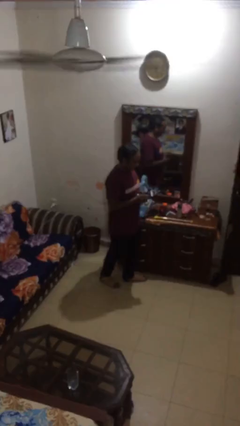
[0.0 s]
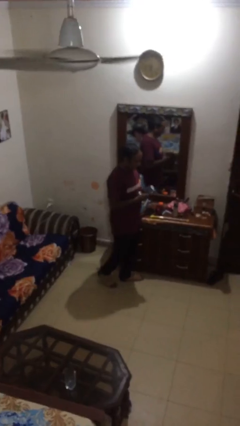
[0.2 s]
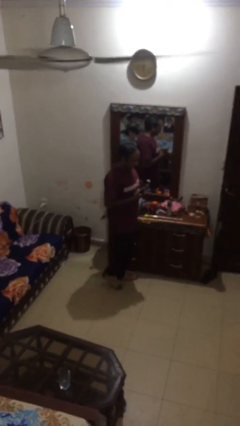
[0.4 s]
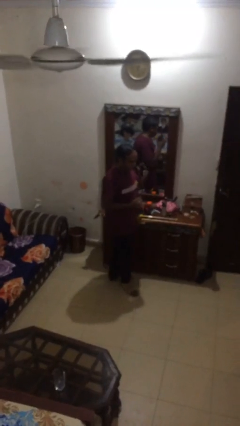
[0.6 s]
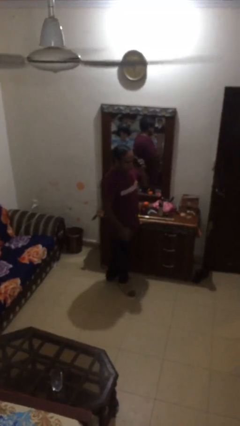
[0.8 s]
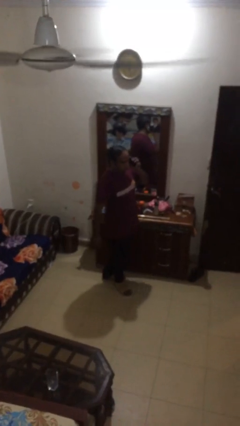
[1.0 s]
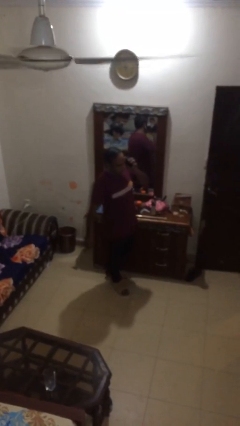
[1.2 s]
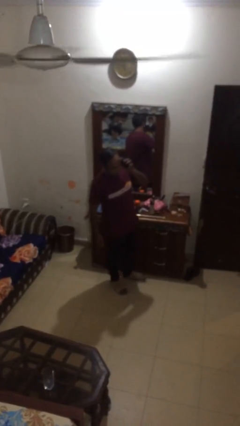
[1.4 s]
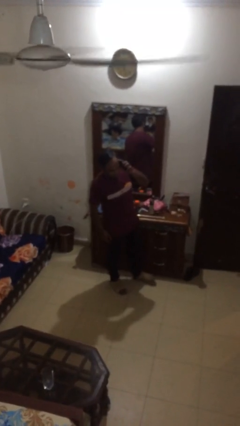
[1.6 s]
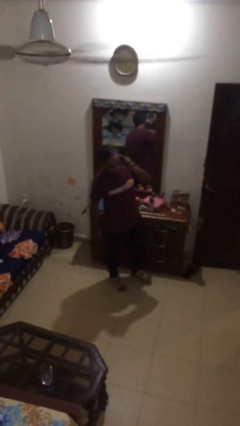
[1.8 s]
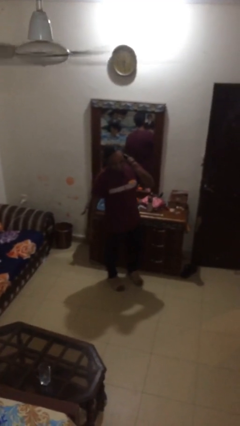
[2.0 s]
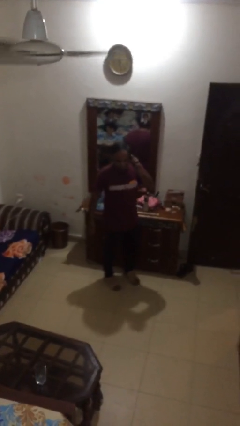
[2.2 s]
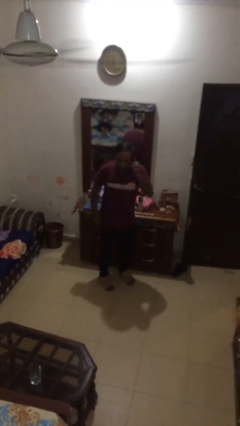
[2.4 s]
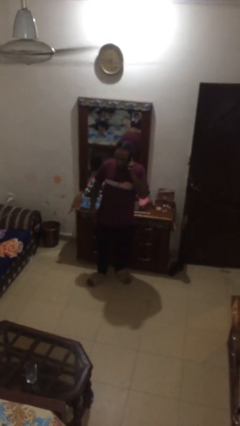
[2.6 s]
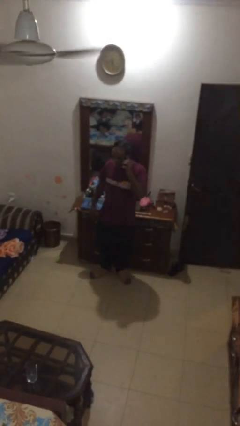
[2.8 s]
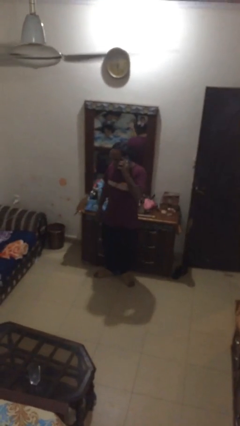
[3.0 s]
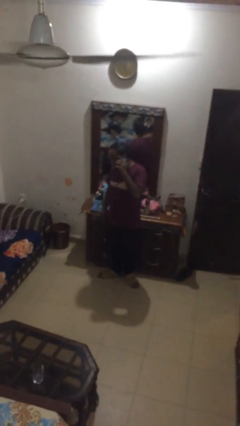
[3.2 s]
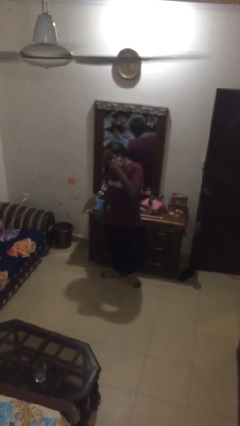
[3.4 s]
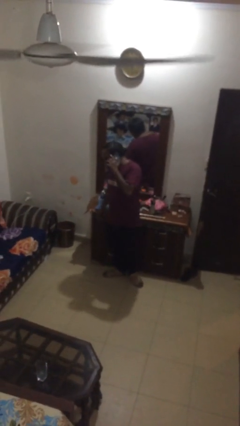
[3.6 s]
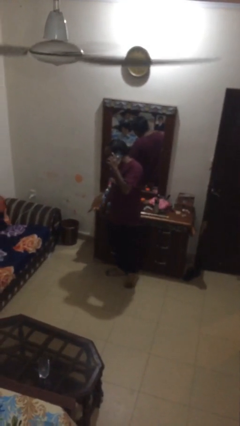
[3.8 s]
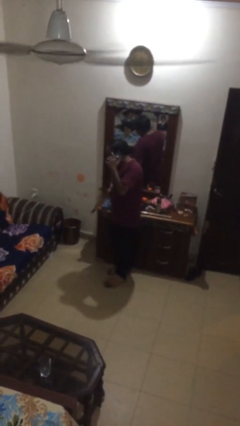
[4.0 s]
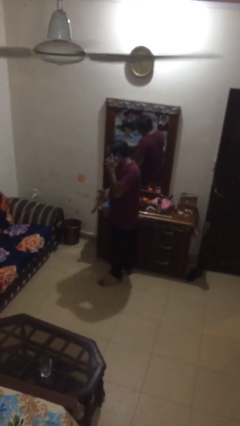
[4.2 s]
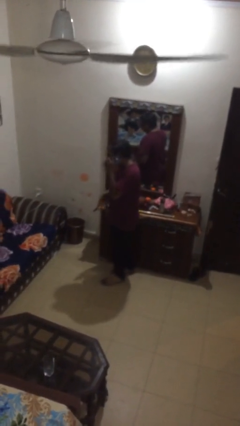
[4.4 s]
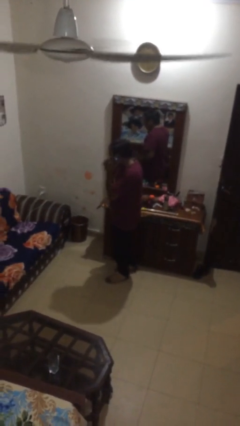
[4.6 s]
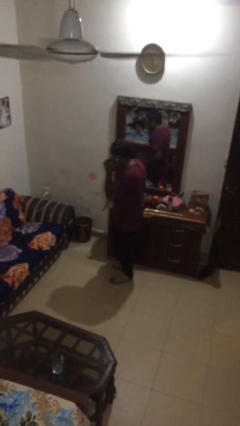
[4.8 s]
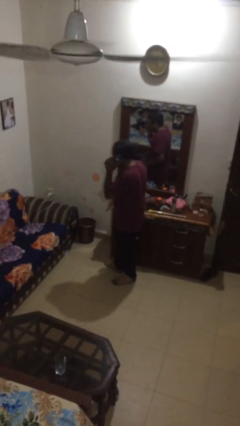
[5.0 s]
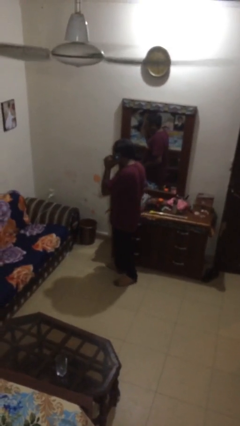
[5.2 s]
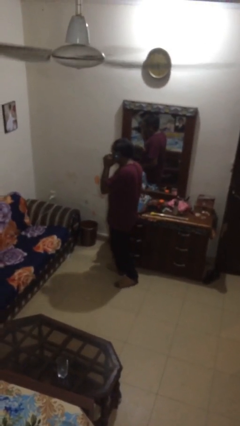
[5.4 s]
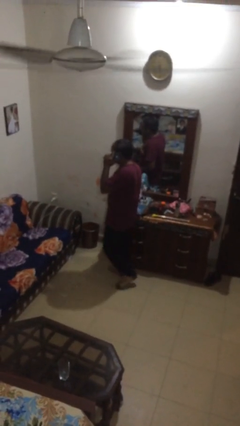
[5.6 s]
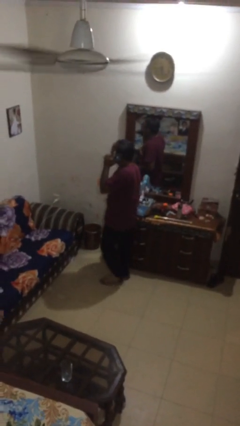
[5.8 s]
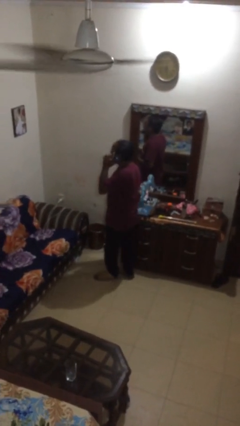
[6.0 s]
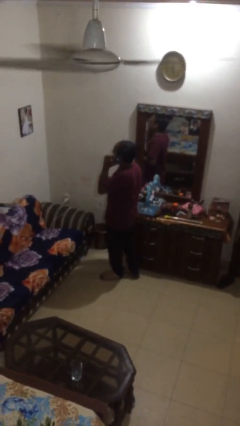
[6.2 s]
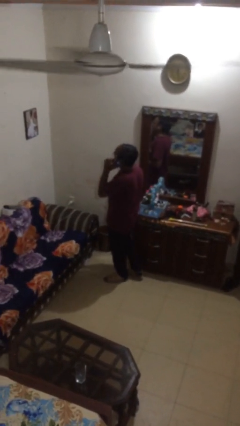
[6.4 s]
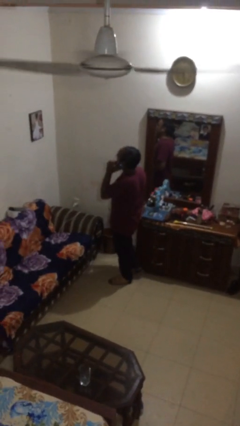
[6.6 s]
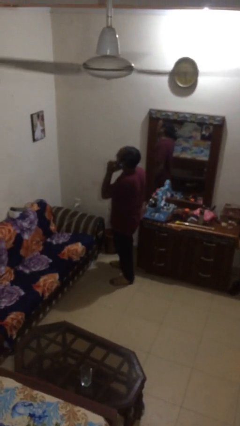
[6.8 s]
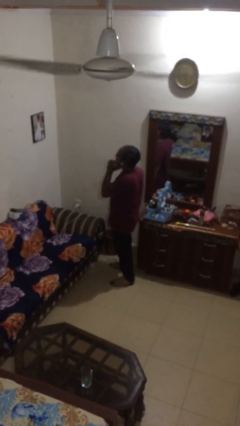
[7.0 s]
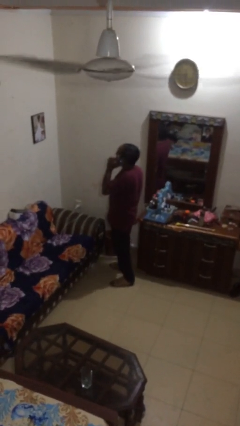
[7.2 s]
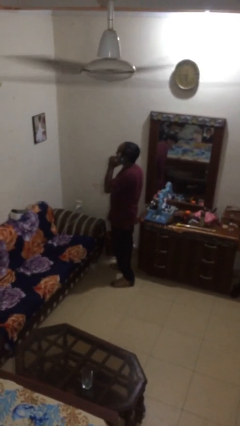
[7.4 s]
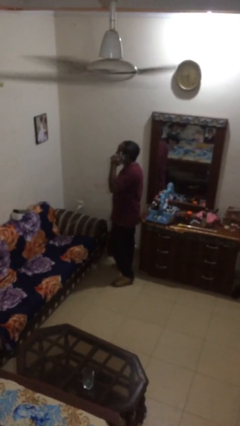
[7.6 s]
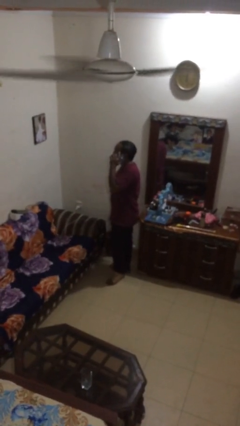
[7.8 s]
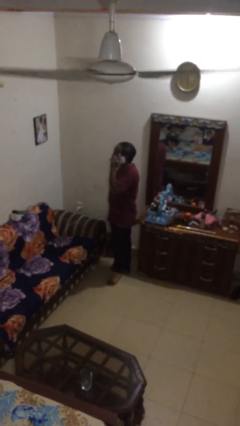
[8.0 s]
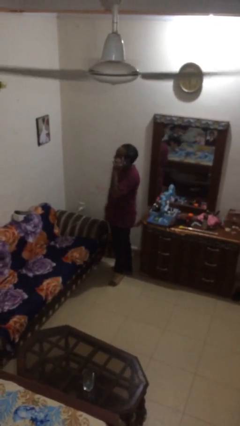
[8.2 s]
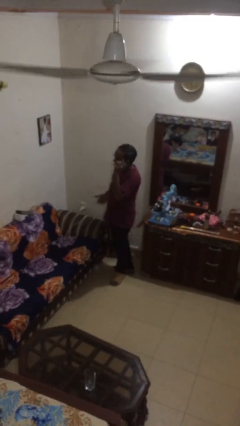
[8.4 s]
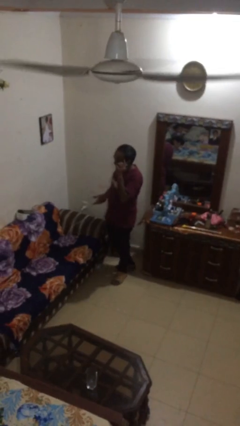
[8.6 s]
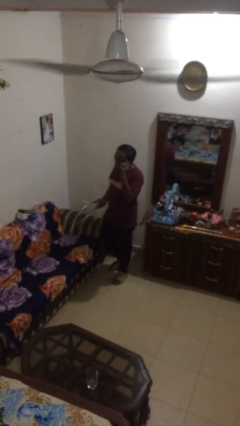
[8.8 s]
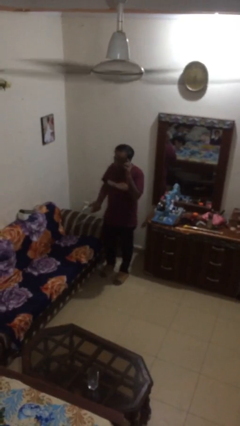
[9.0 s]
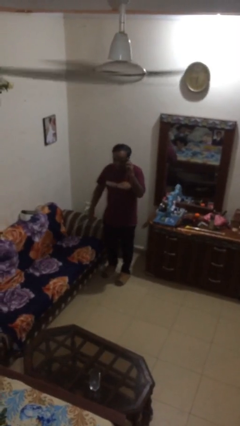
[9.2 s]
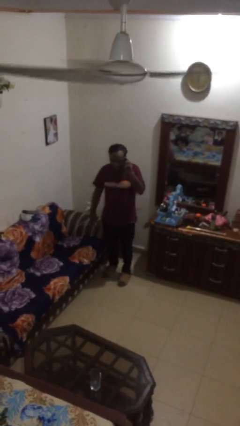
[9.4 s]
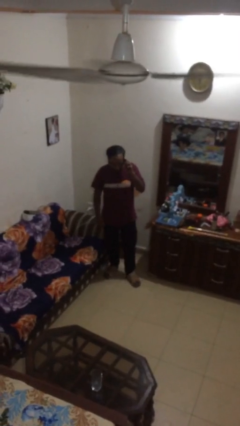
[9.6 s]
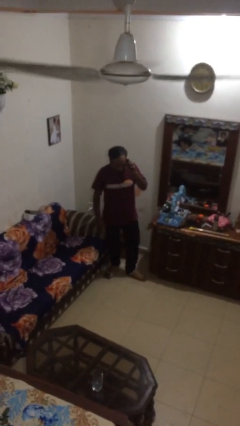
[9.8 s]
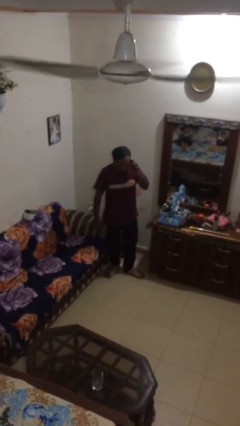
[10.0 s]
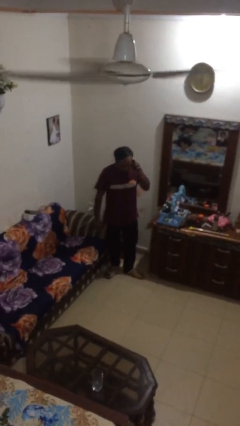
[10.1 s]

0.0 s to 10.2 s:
person talks on phone

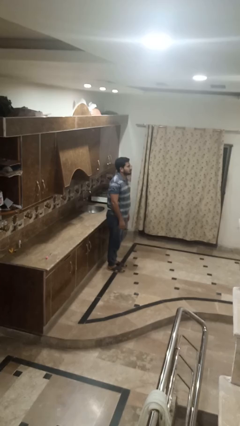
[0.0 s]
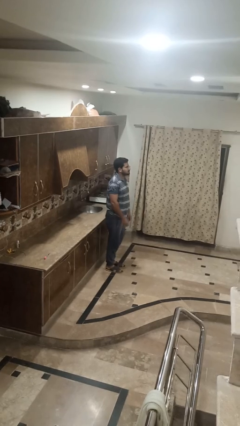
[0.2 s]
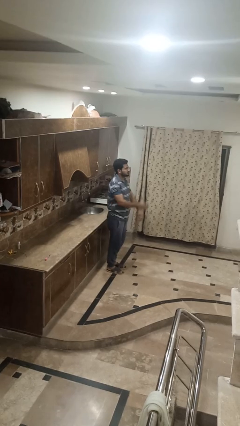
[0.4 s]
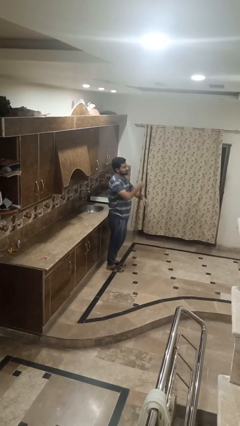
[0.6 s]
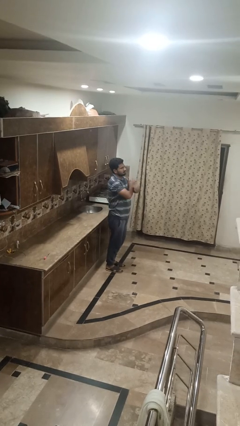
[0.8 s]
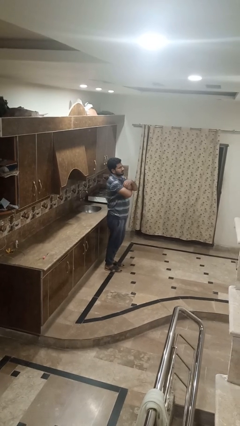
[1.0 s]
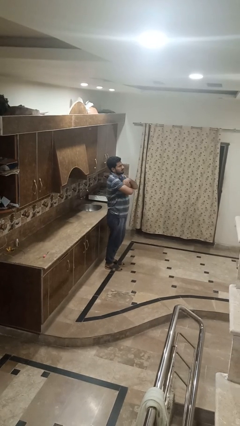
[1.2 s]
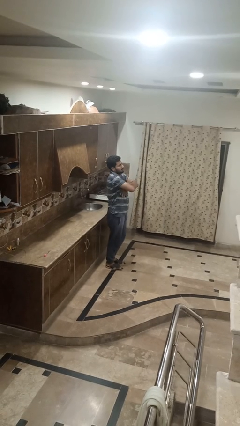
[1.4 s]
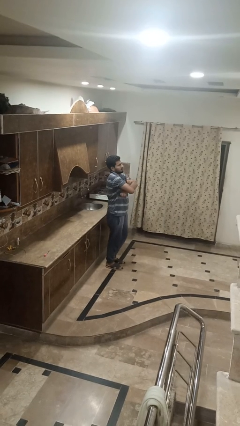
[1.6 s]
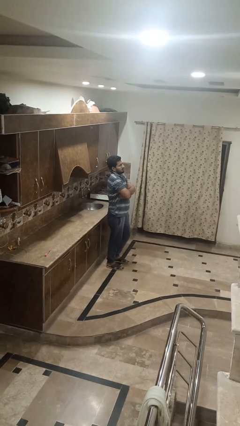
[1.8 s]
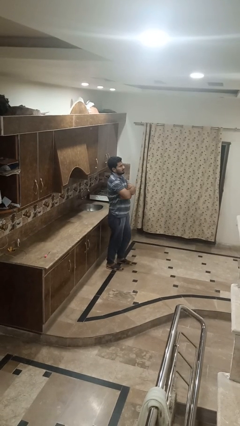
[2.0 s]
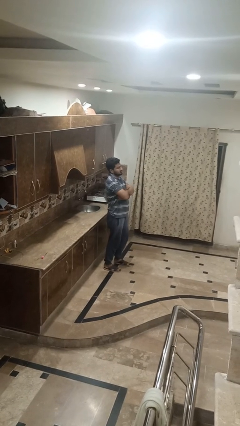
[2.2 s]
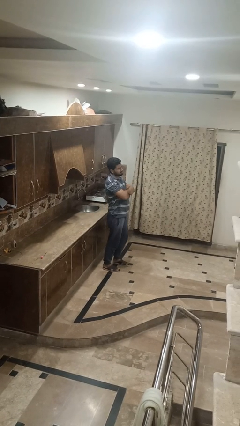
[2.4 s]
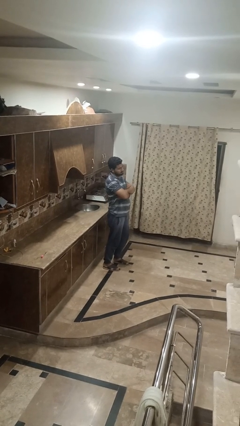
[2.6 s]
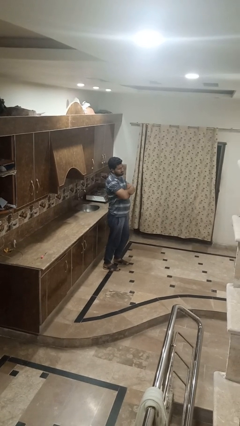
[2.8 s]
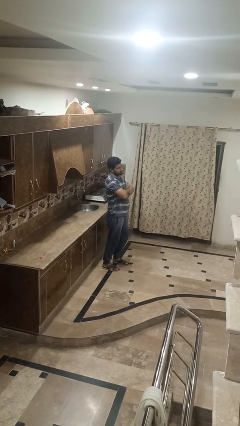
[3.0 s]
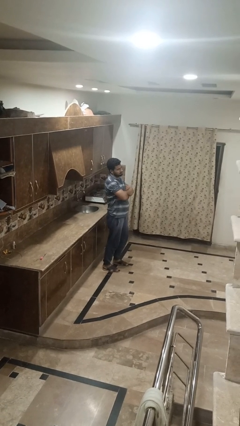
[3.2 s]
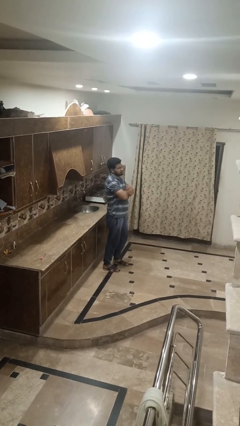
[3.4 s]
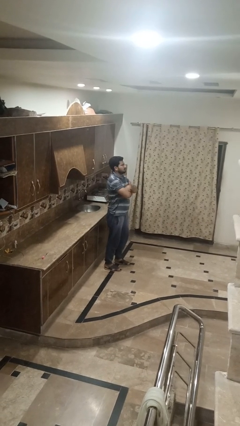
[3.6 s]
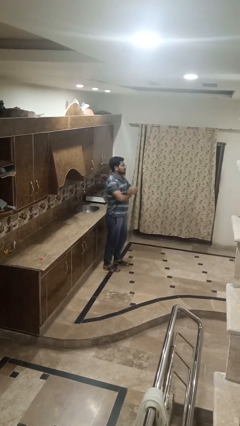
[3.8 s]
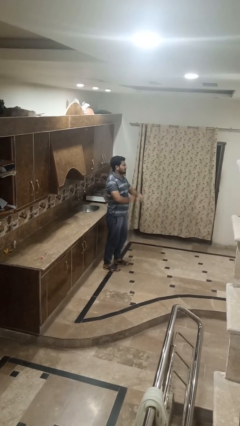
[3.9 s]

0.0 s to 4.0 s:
person crosses arms

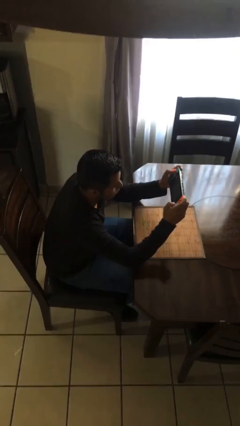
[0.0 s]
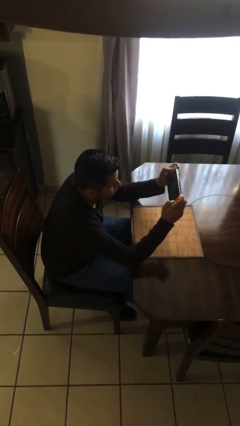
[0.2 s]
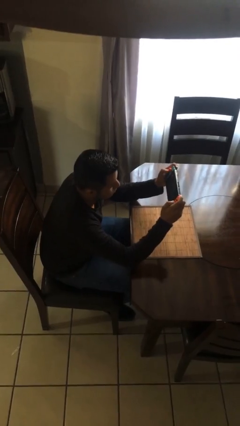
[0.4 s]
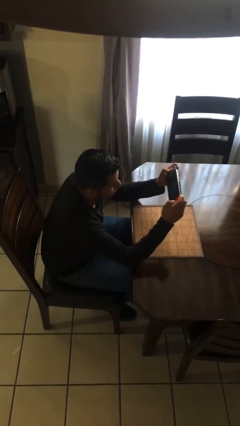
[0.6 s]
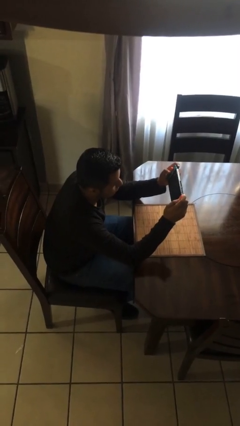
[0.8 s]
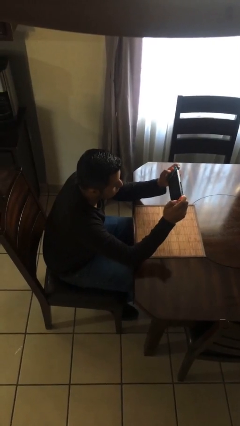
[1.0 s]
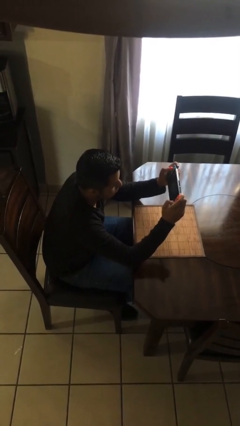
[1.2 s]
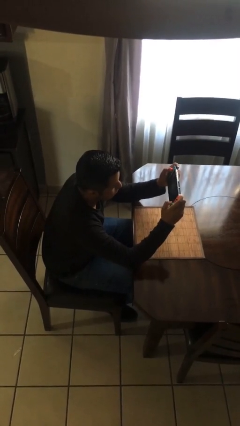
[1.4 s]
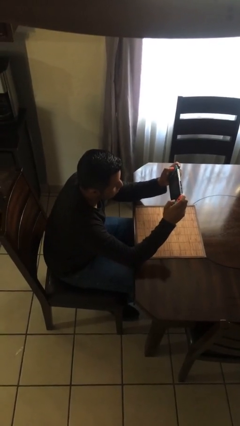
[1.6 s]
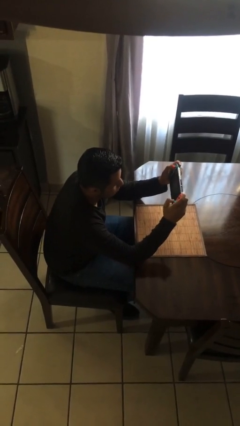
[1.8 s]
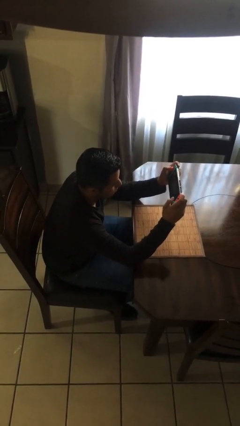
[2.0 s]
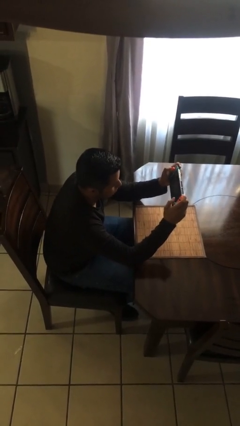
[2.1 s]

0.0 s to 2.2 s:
person interacts with handheld game

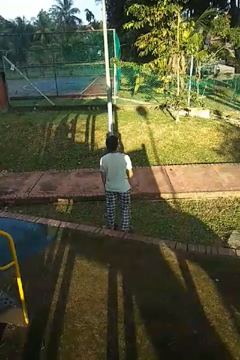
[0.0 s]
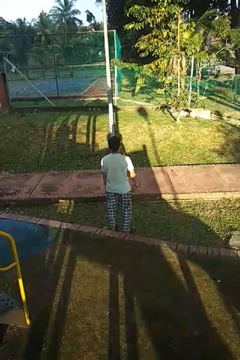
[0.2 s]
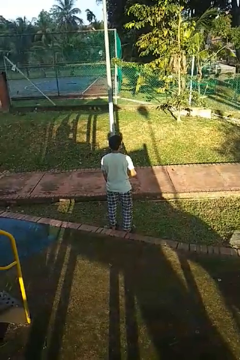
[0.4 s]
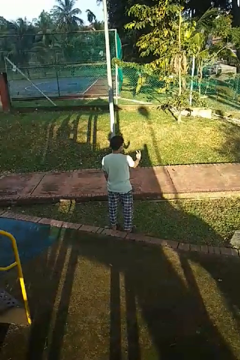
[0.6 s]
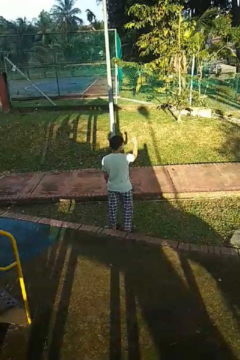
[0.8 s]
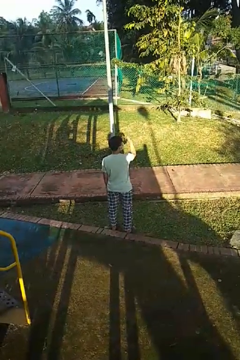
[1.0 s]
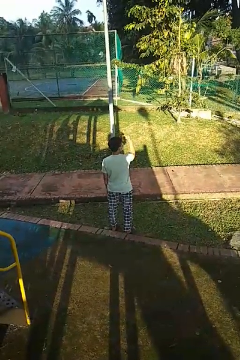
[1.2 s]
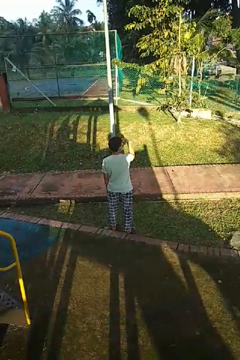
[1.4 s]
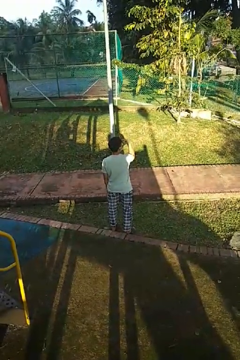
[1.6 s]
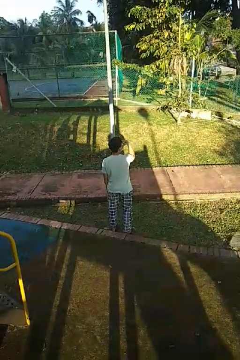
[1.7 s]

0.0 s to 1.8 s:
person gestures watch closely

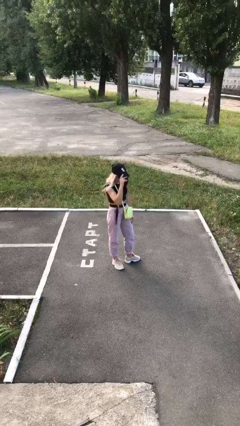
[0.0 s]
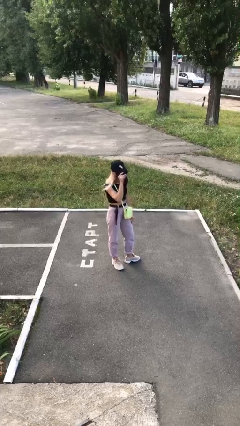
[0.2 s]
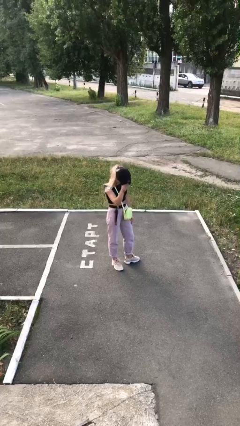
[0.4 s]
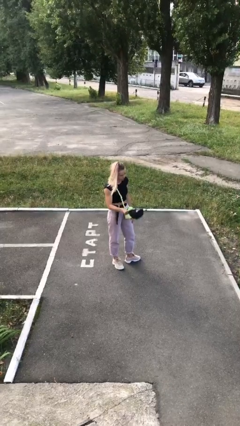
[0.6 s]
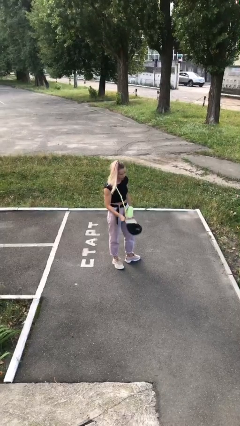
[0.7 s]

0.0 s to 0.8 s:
person takes off hat
